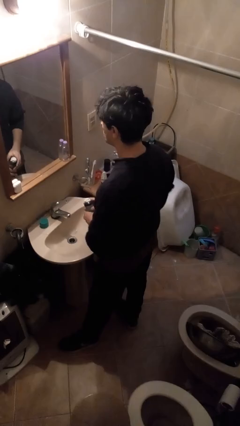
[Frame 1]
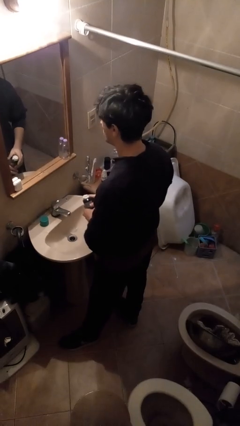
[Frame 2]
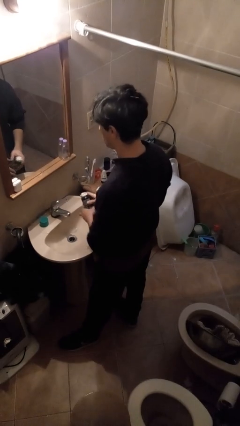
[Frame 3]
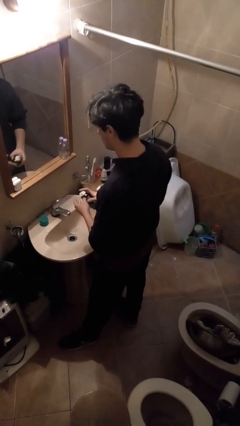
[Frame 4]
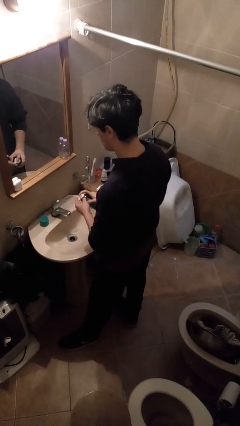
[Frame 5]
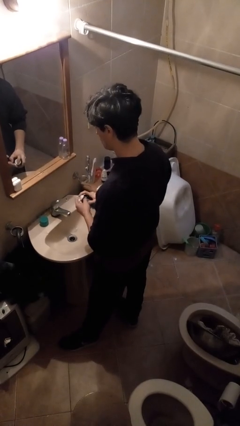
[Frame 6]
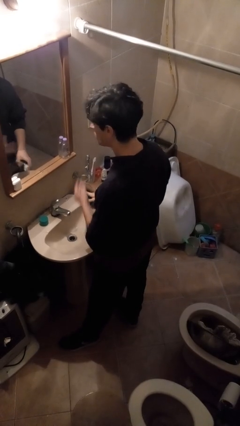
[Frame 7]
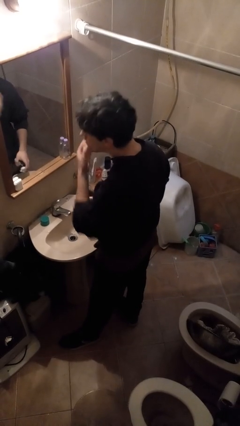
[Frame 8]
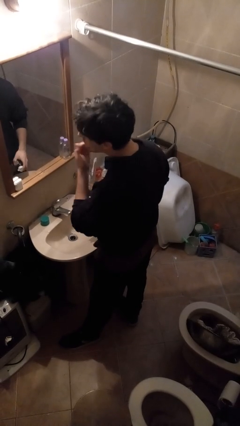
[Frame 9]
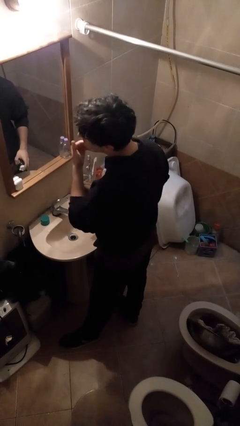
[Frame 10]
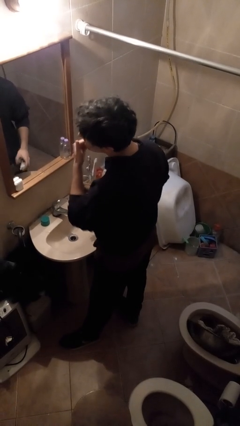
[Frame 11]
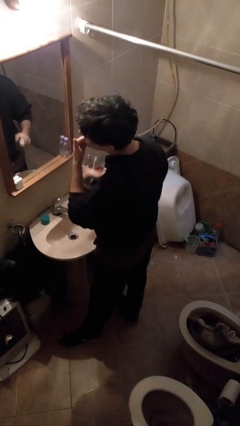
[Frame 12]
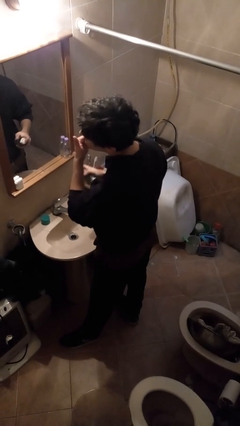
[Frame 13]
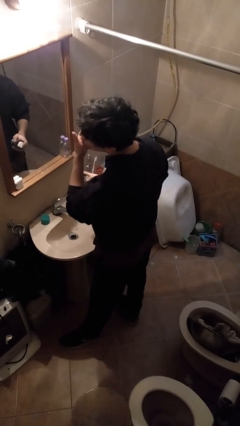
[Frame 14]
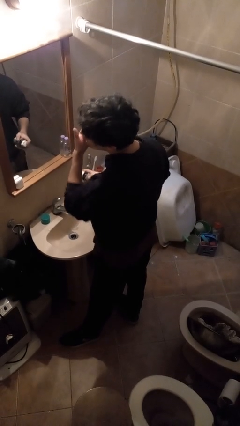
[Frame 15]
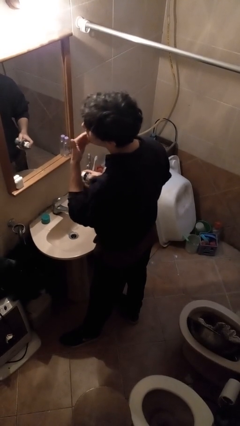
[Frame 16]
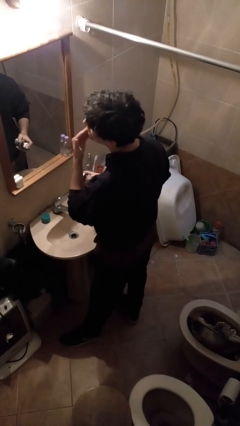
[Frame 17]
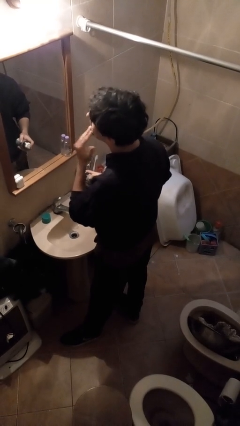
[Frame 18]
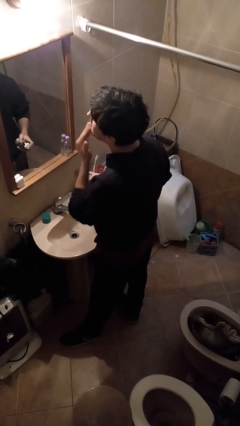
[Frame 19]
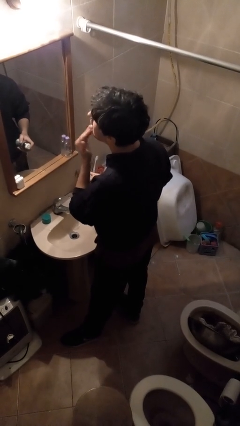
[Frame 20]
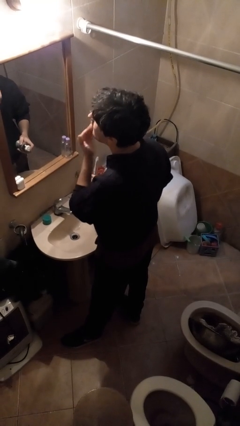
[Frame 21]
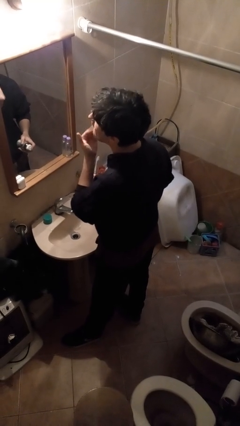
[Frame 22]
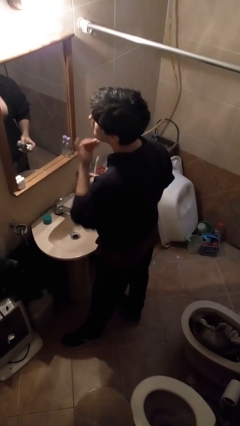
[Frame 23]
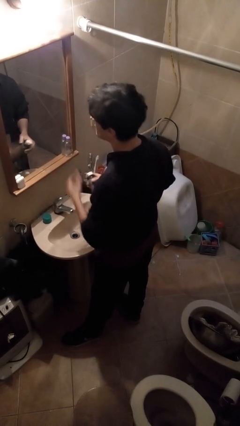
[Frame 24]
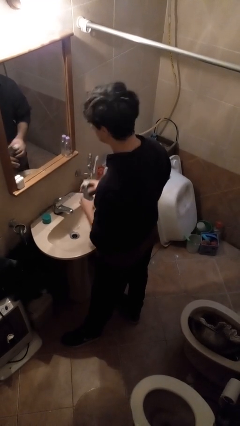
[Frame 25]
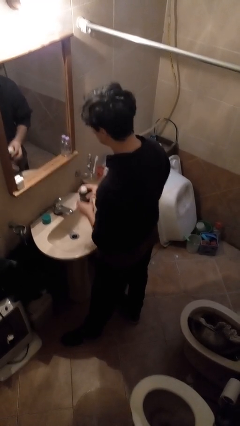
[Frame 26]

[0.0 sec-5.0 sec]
person applies shaving cream

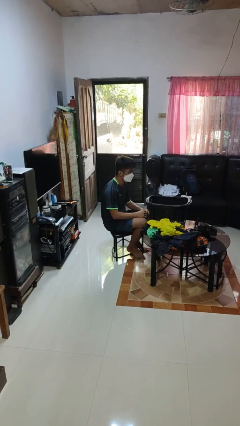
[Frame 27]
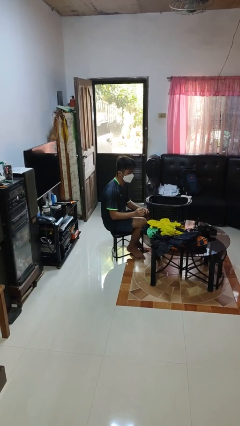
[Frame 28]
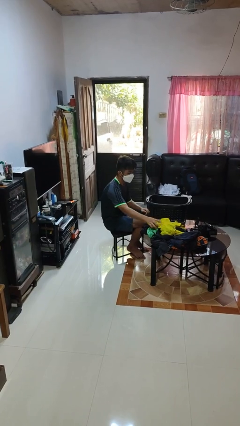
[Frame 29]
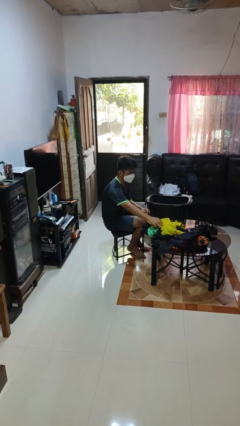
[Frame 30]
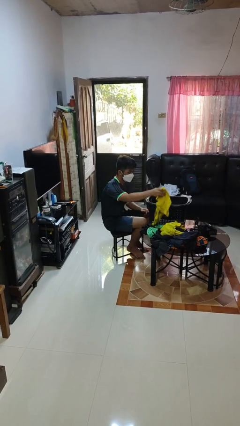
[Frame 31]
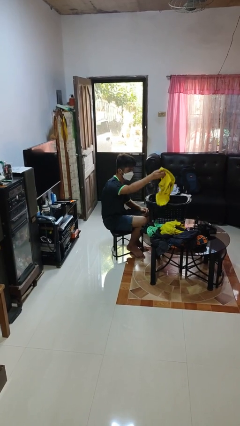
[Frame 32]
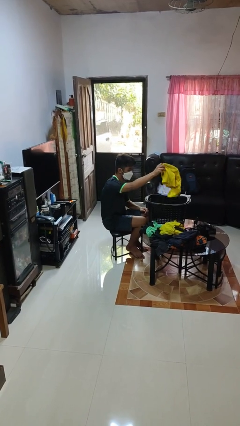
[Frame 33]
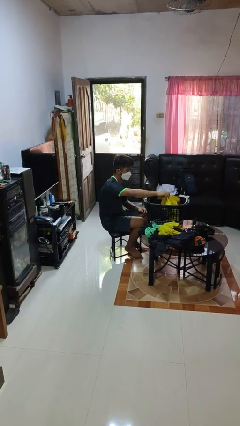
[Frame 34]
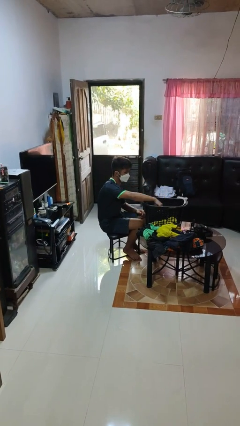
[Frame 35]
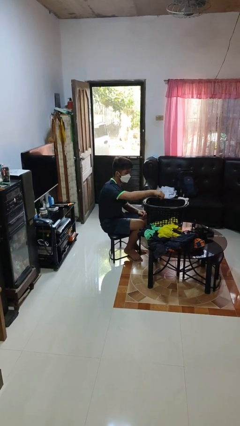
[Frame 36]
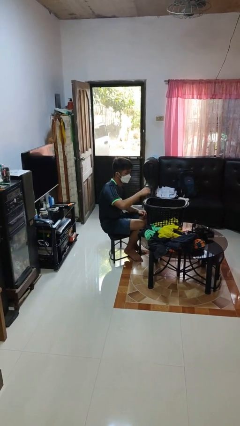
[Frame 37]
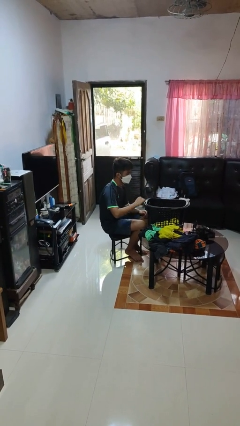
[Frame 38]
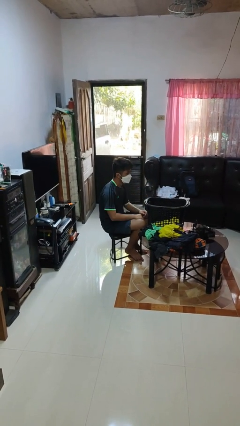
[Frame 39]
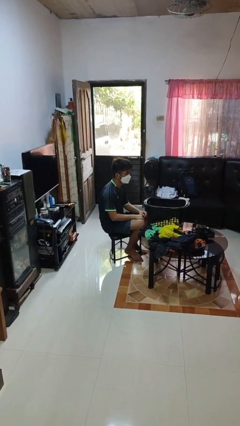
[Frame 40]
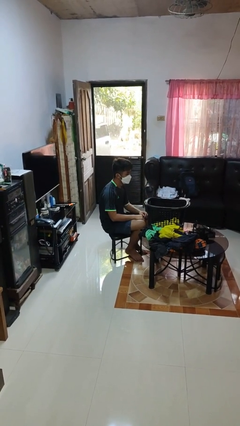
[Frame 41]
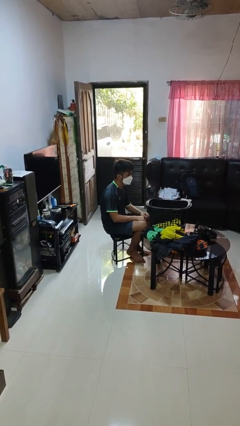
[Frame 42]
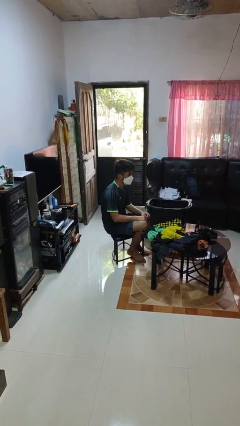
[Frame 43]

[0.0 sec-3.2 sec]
person puts object into basket

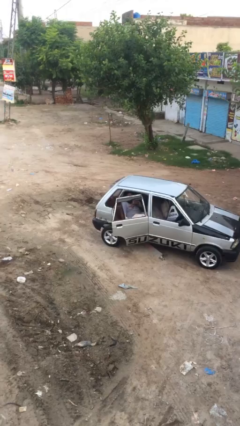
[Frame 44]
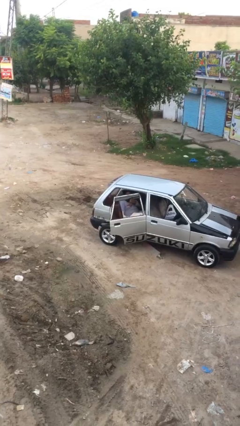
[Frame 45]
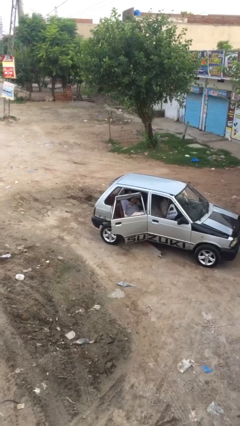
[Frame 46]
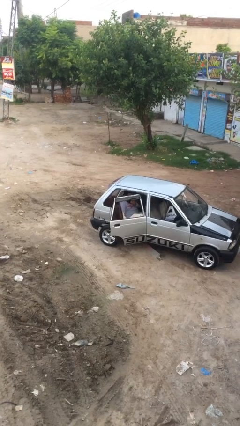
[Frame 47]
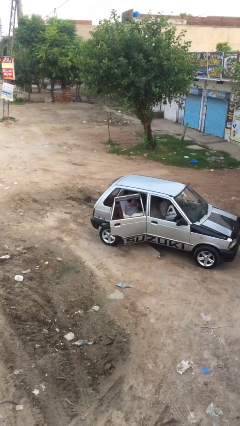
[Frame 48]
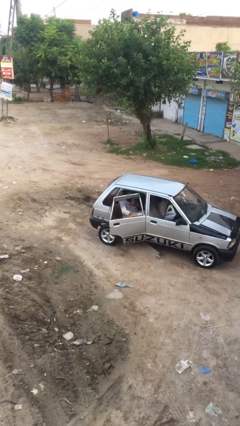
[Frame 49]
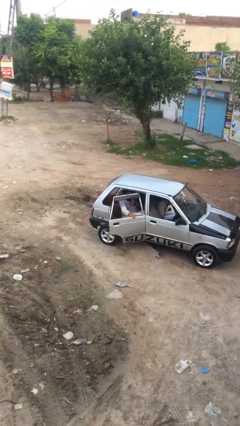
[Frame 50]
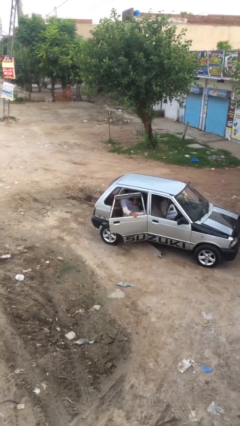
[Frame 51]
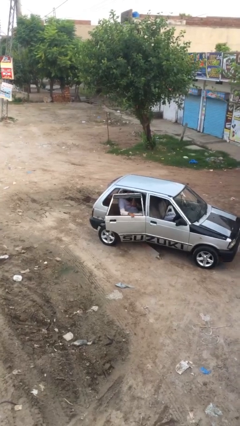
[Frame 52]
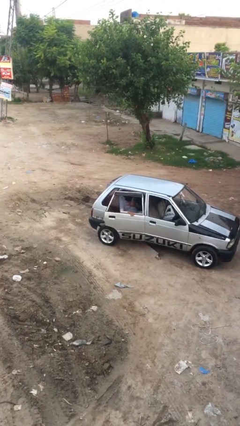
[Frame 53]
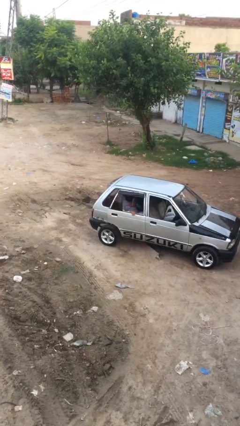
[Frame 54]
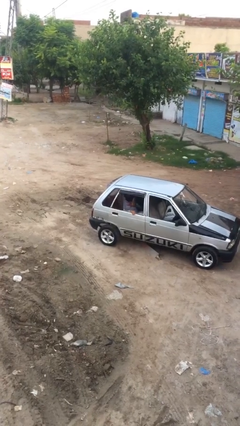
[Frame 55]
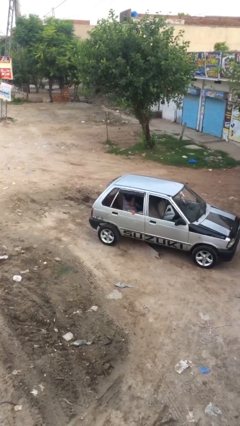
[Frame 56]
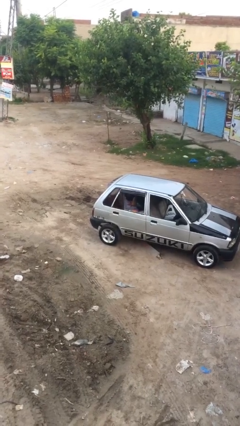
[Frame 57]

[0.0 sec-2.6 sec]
person closes car door

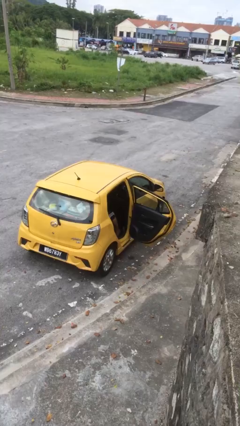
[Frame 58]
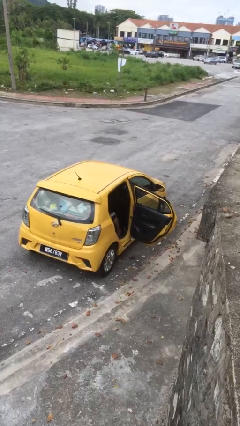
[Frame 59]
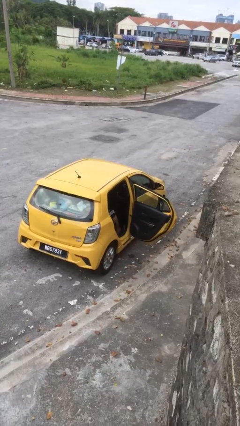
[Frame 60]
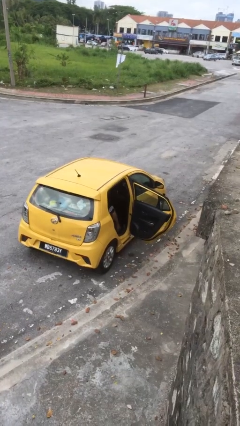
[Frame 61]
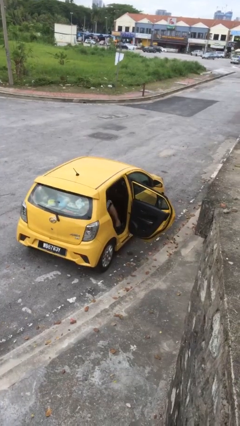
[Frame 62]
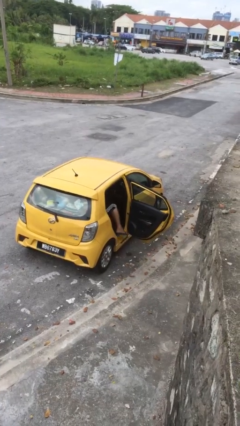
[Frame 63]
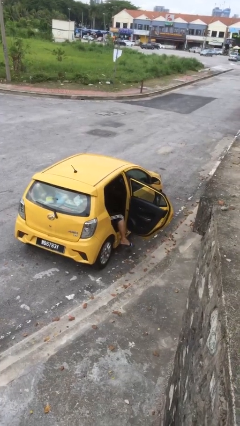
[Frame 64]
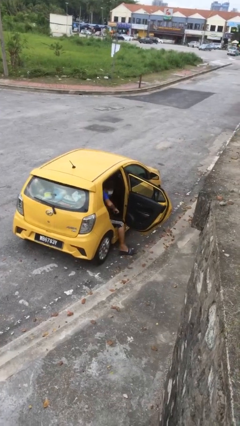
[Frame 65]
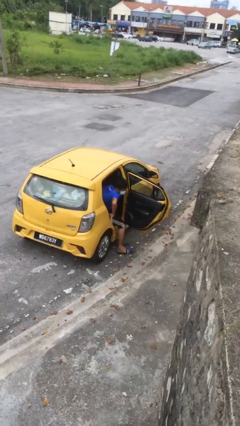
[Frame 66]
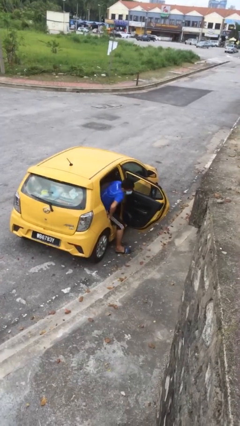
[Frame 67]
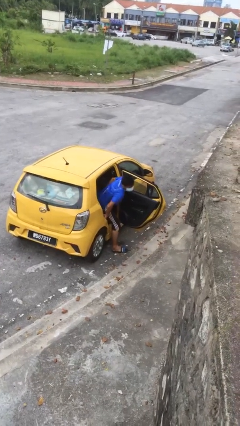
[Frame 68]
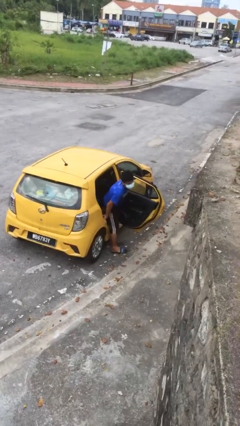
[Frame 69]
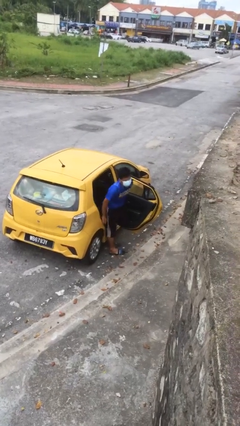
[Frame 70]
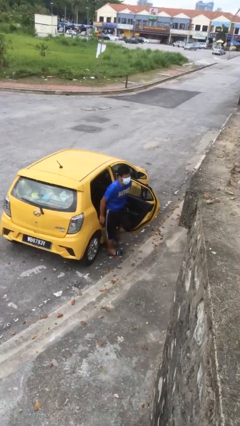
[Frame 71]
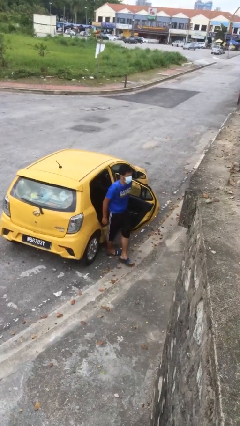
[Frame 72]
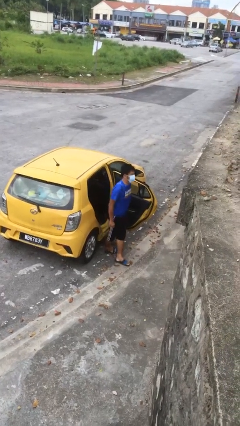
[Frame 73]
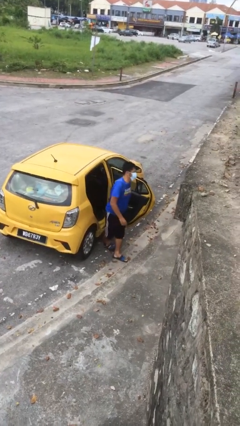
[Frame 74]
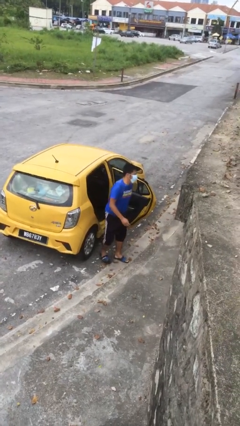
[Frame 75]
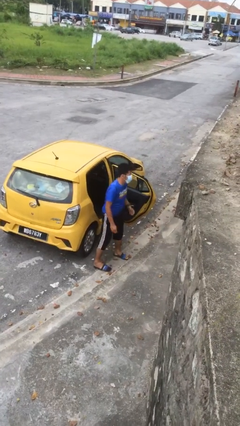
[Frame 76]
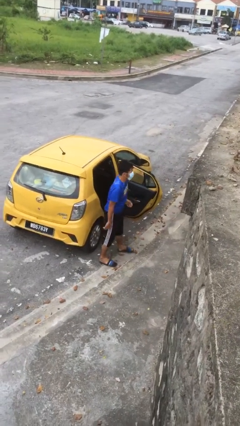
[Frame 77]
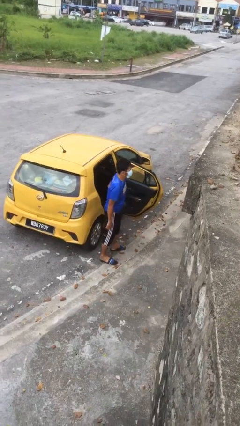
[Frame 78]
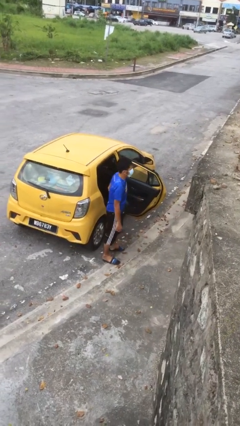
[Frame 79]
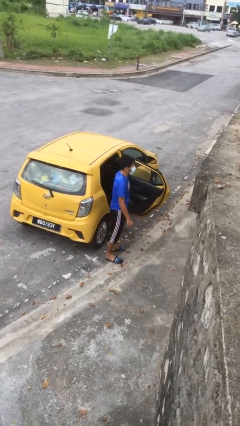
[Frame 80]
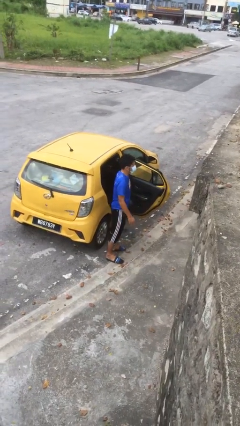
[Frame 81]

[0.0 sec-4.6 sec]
person exits car

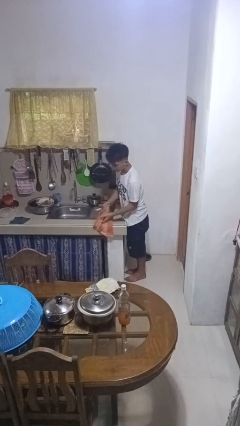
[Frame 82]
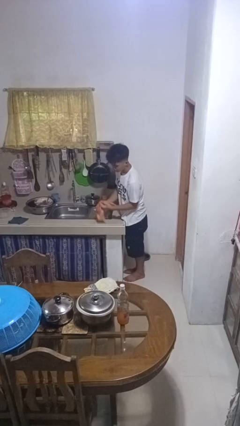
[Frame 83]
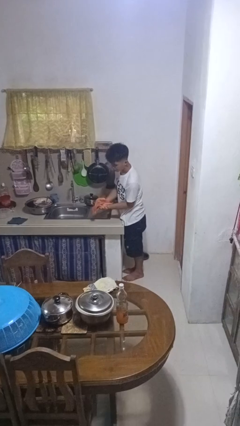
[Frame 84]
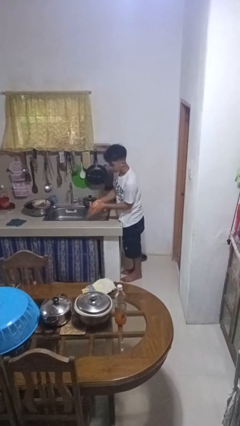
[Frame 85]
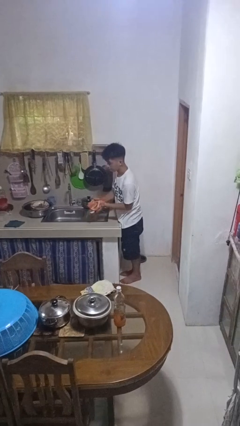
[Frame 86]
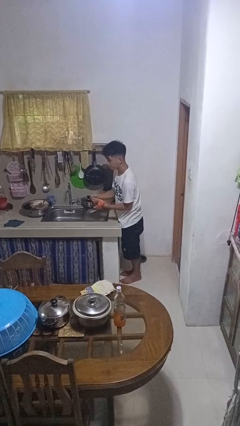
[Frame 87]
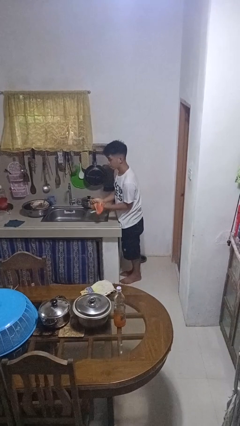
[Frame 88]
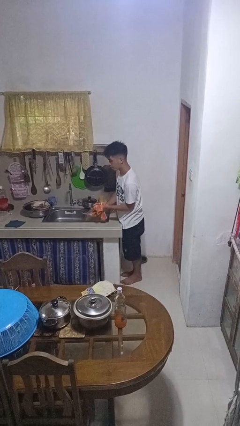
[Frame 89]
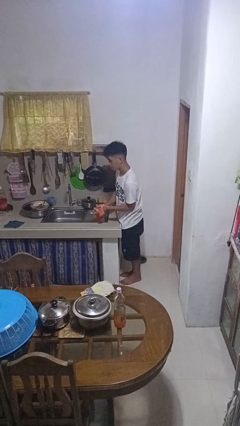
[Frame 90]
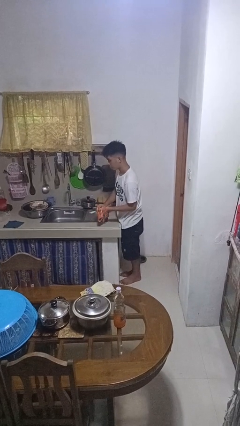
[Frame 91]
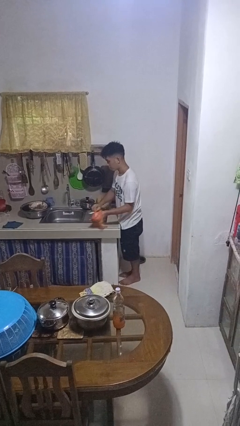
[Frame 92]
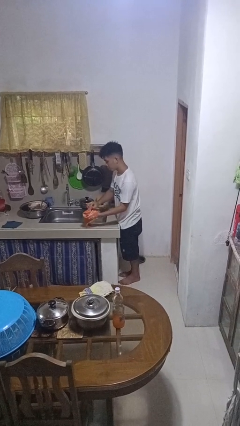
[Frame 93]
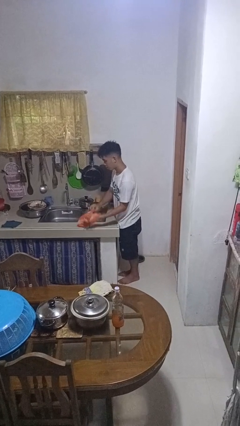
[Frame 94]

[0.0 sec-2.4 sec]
person dries hands with towel
